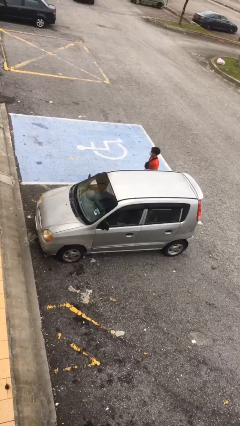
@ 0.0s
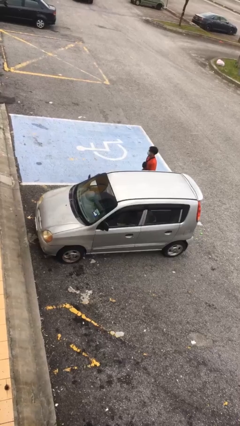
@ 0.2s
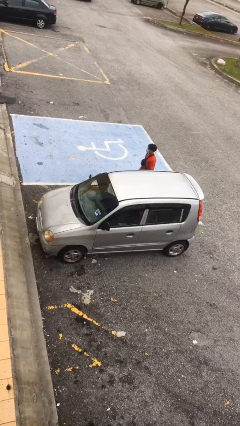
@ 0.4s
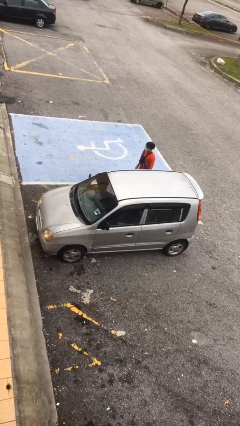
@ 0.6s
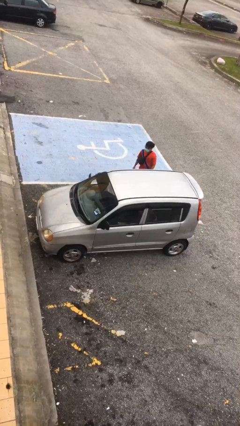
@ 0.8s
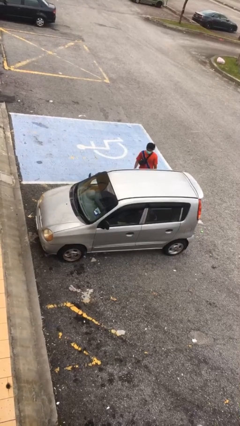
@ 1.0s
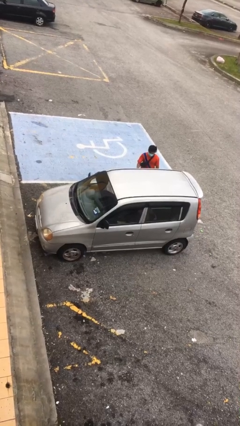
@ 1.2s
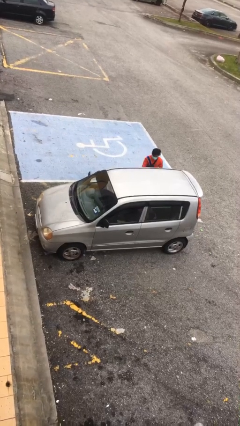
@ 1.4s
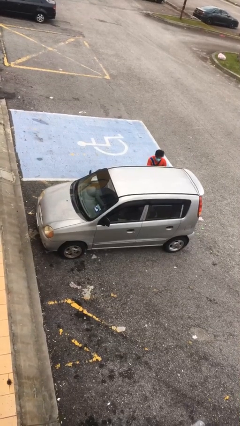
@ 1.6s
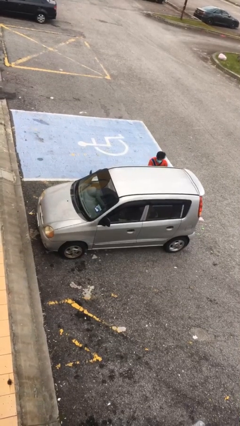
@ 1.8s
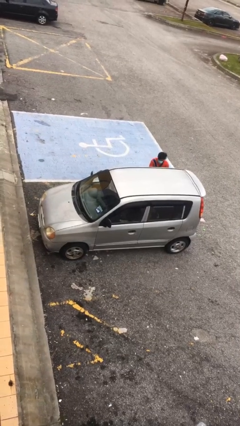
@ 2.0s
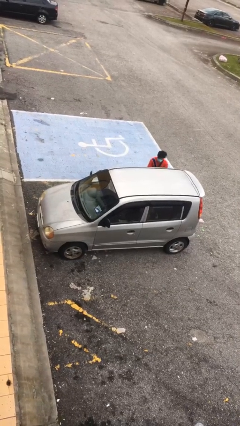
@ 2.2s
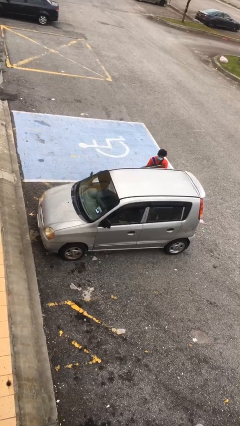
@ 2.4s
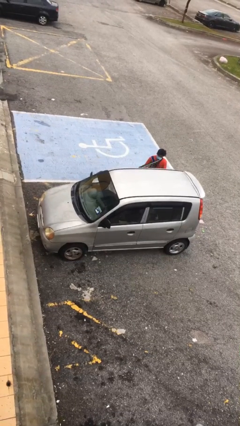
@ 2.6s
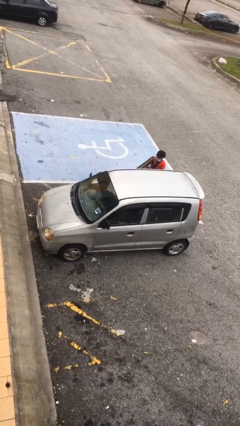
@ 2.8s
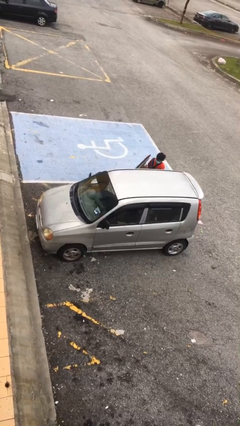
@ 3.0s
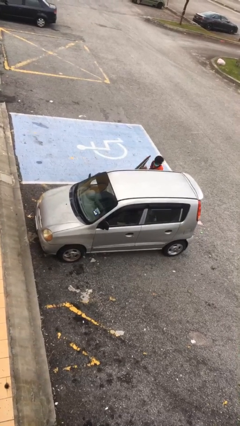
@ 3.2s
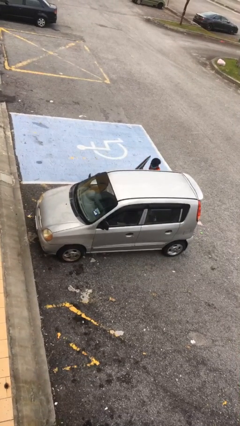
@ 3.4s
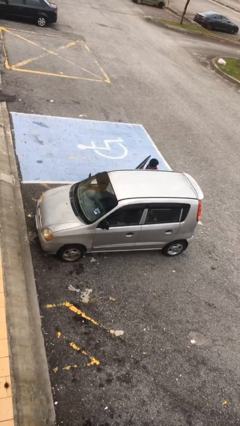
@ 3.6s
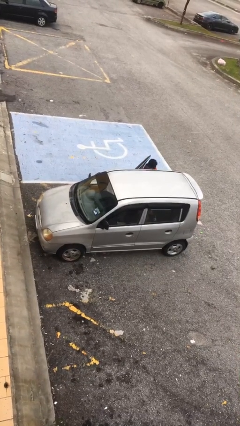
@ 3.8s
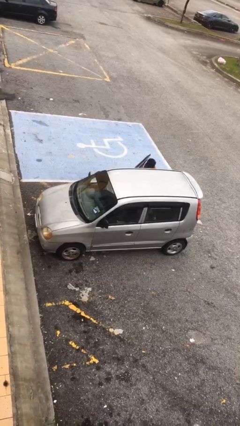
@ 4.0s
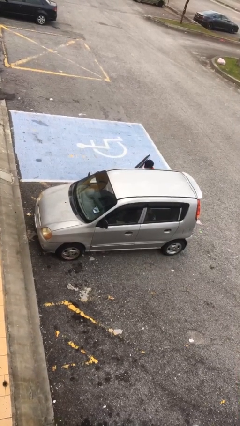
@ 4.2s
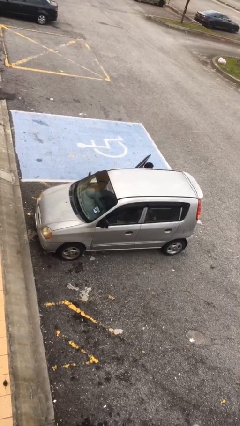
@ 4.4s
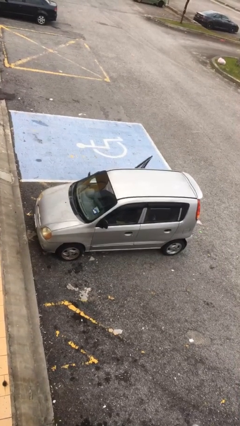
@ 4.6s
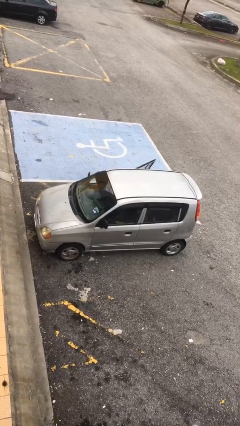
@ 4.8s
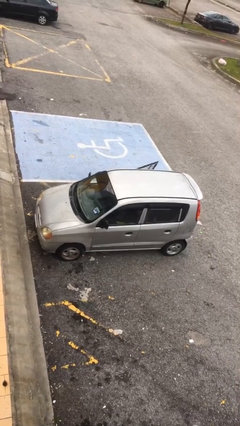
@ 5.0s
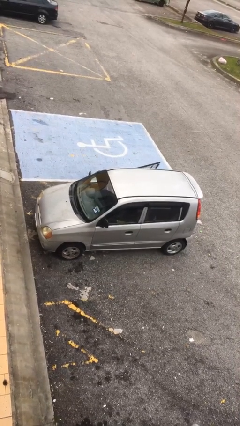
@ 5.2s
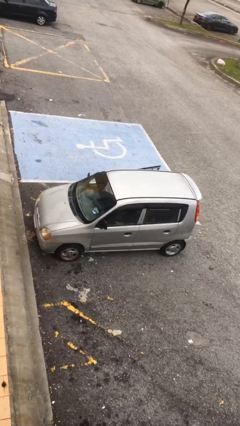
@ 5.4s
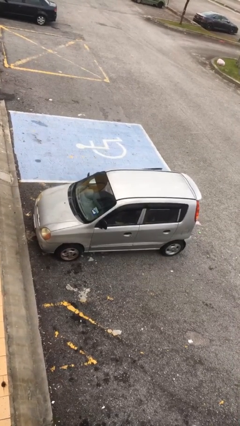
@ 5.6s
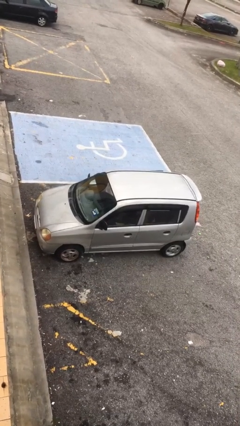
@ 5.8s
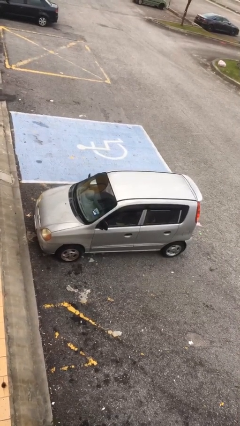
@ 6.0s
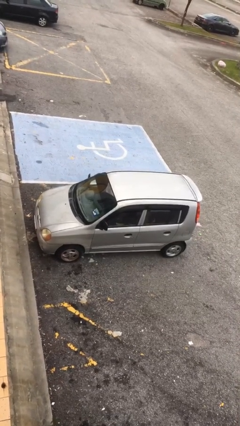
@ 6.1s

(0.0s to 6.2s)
car picks up person

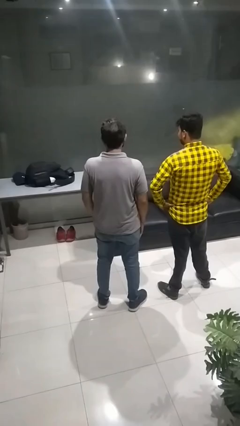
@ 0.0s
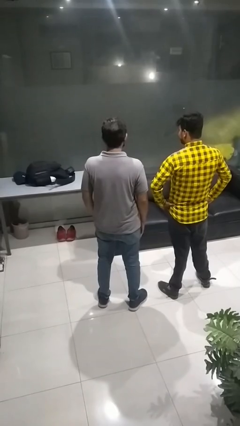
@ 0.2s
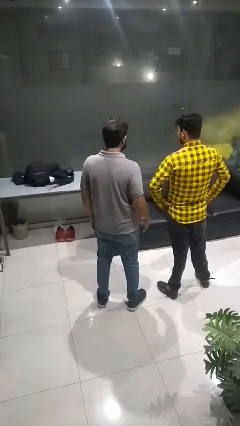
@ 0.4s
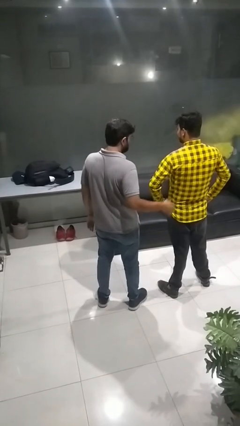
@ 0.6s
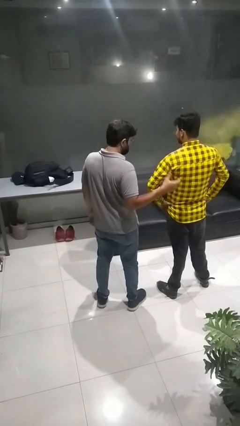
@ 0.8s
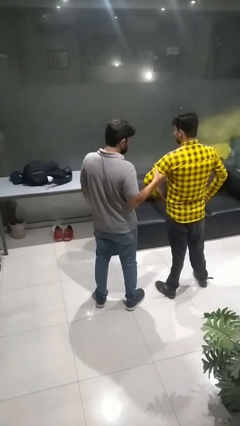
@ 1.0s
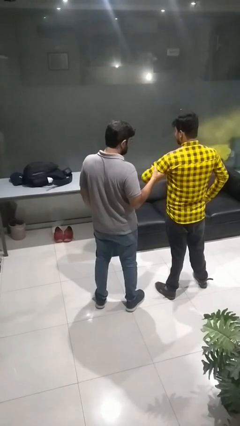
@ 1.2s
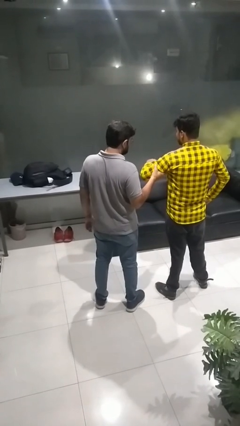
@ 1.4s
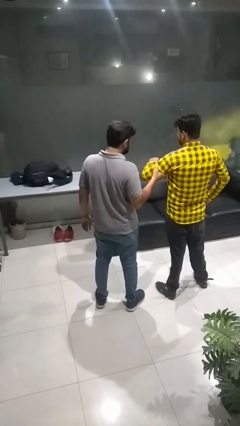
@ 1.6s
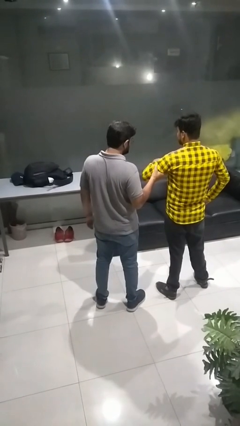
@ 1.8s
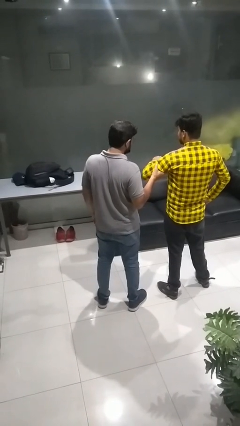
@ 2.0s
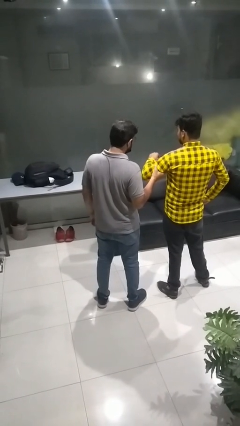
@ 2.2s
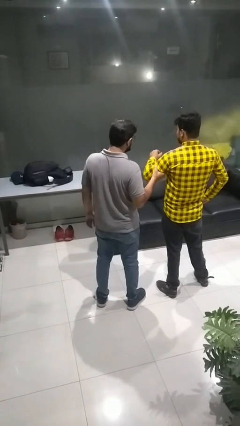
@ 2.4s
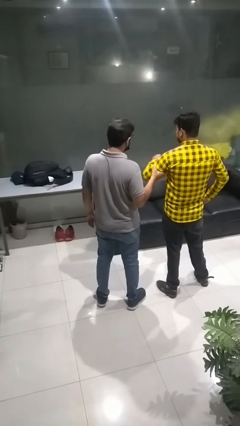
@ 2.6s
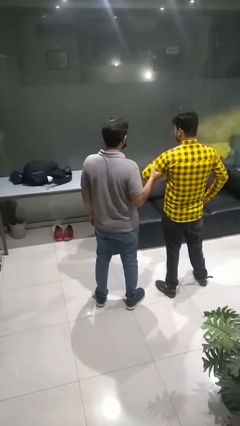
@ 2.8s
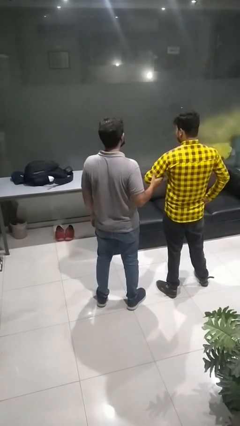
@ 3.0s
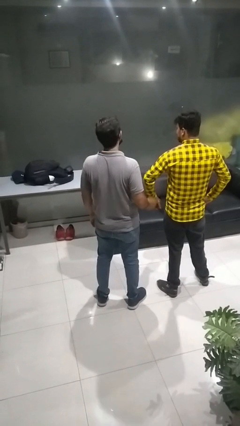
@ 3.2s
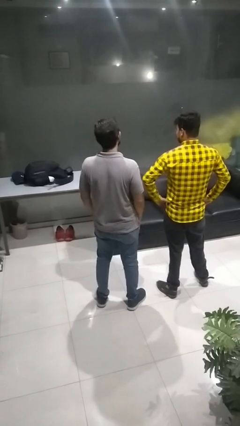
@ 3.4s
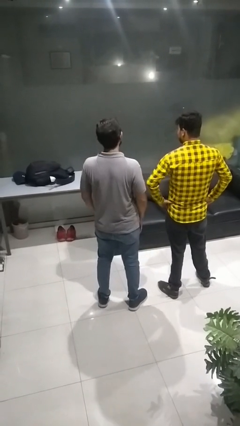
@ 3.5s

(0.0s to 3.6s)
person grabs person by bicep

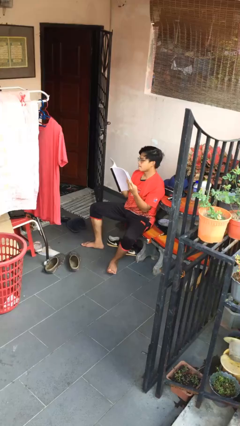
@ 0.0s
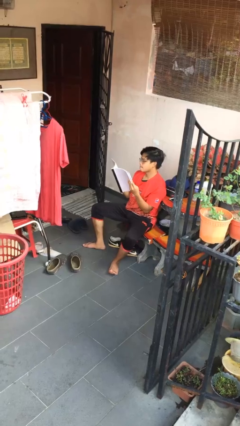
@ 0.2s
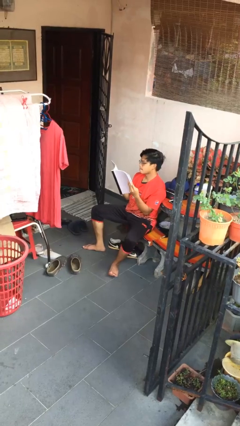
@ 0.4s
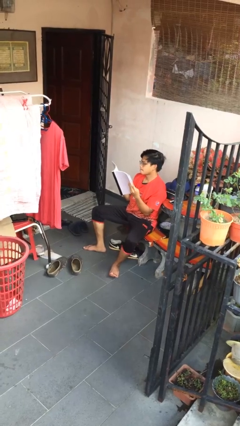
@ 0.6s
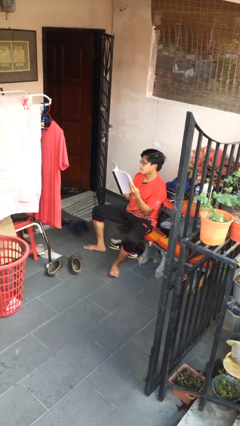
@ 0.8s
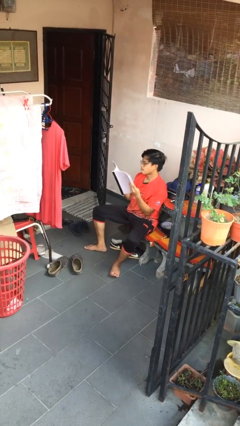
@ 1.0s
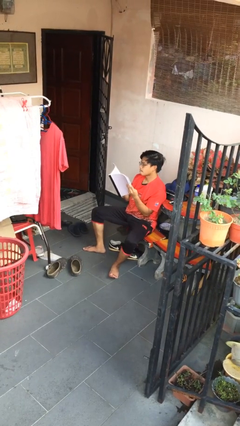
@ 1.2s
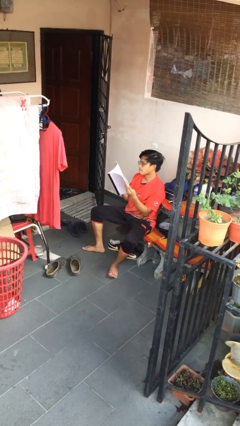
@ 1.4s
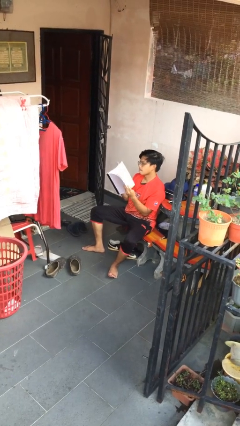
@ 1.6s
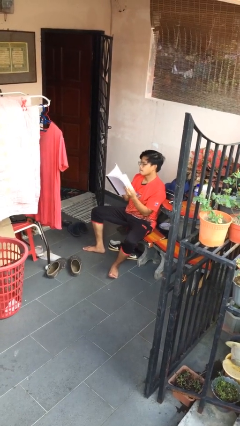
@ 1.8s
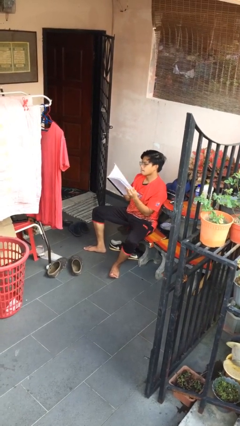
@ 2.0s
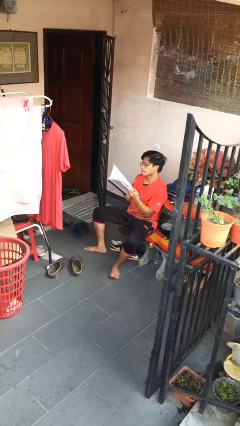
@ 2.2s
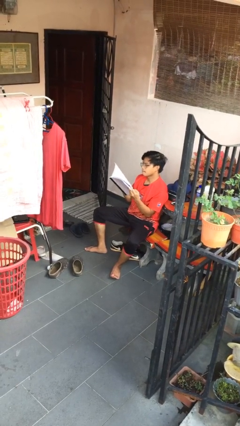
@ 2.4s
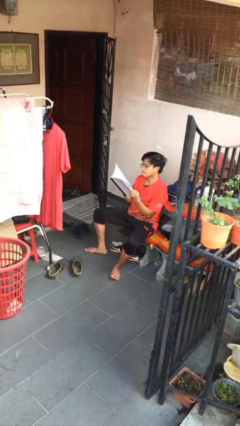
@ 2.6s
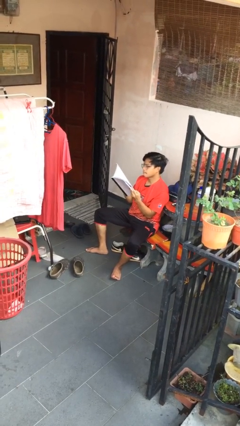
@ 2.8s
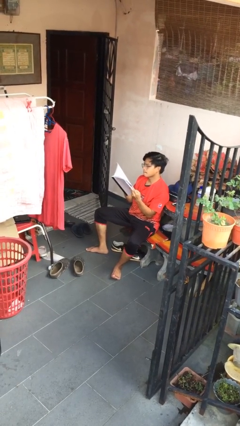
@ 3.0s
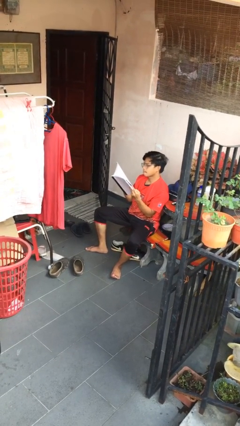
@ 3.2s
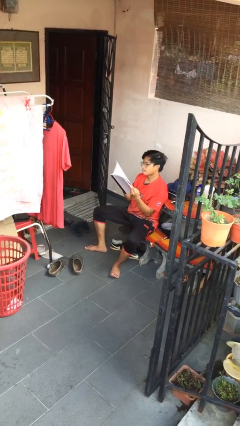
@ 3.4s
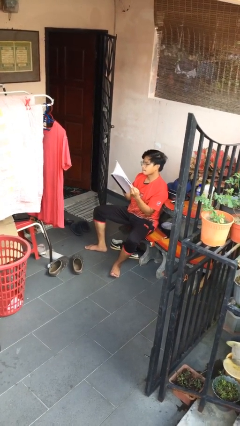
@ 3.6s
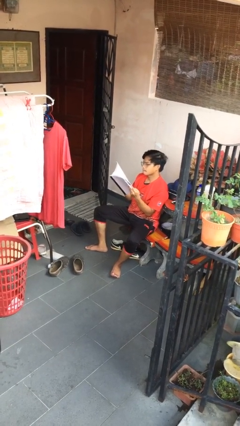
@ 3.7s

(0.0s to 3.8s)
person reads document

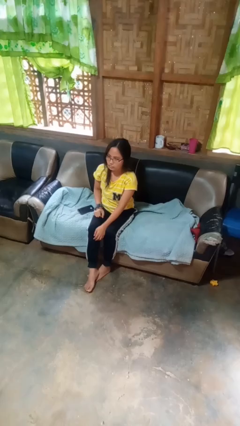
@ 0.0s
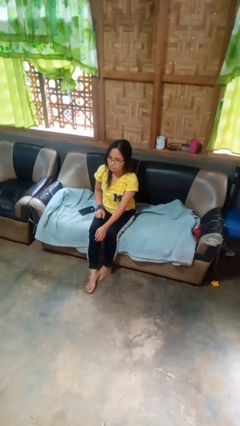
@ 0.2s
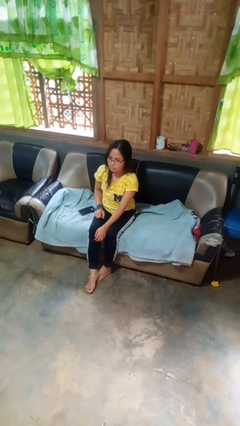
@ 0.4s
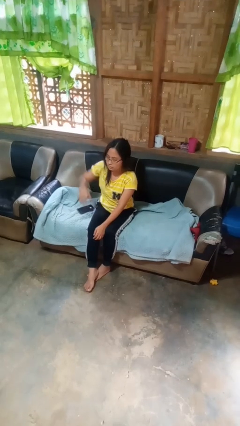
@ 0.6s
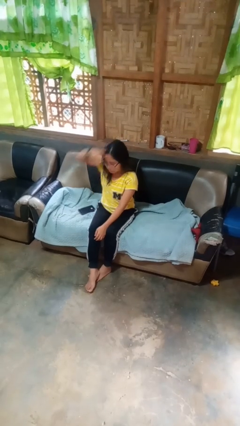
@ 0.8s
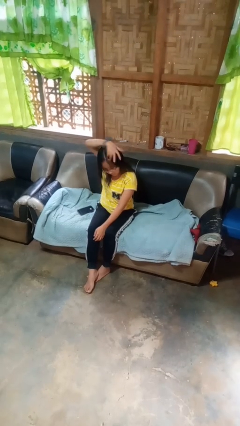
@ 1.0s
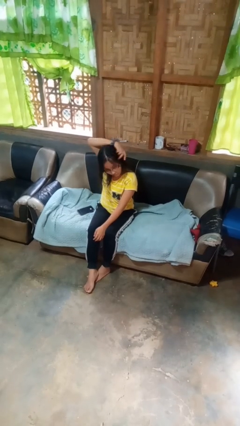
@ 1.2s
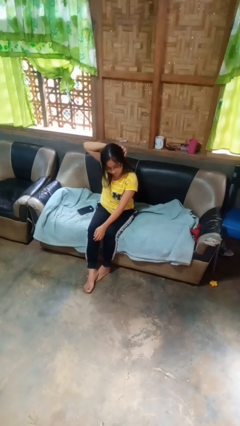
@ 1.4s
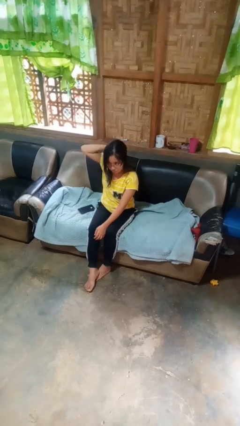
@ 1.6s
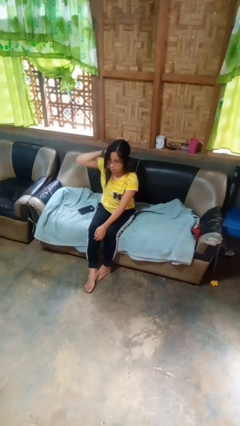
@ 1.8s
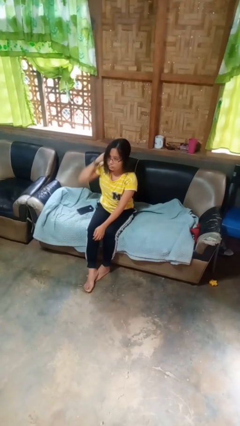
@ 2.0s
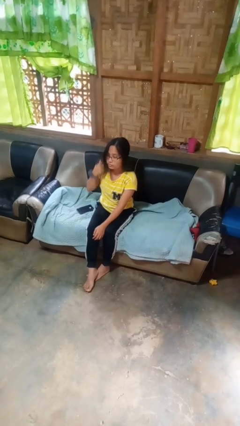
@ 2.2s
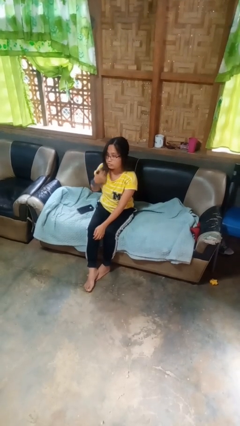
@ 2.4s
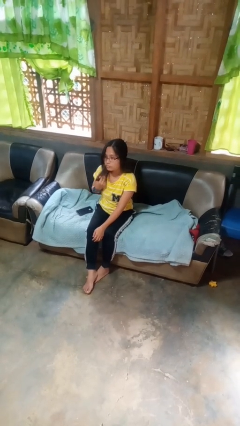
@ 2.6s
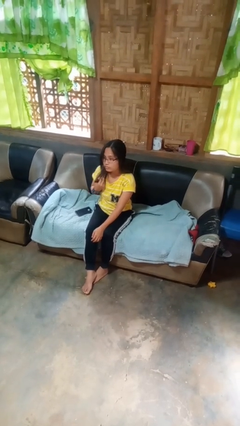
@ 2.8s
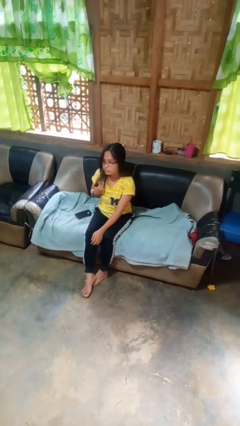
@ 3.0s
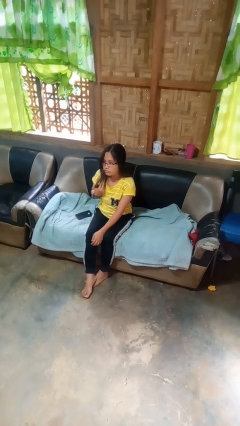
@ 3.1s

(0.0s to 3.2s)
person strokes hair

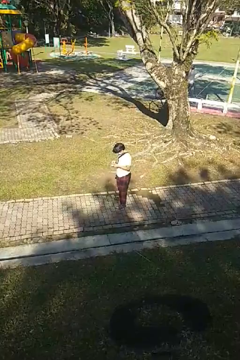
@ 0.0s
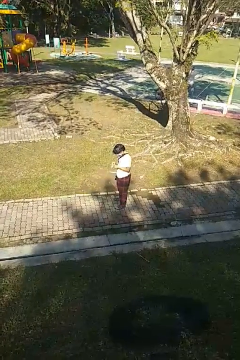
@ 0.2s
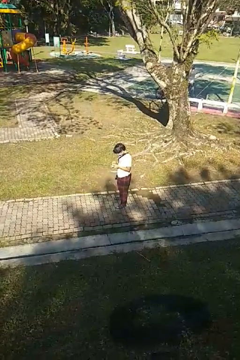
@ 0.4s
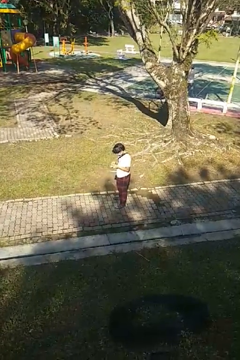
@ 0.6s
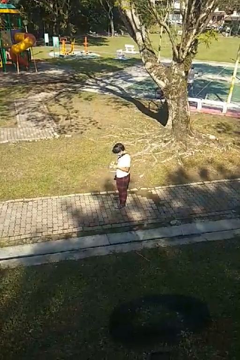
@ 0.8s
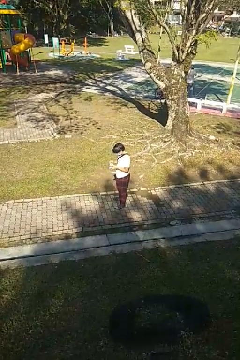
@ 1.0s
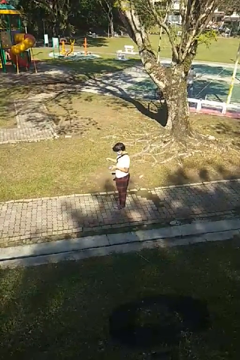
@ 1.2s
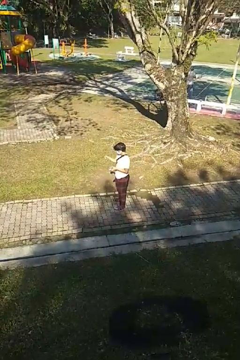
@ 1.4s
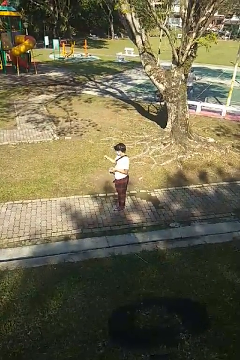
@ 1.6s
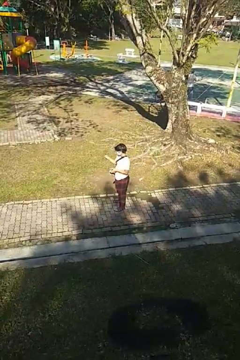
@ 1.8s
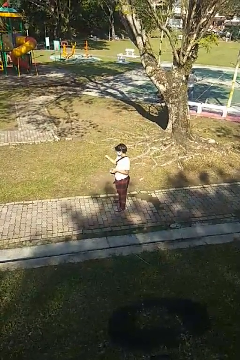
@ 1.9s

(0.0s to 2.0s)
person takes object from purse
